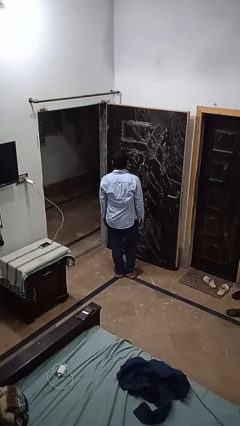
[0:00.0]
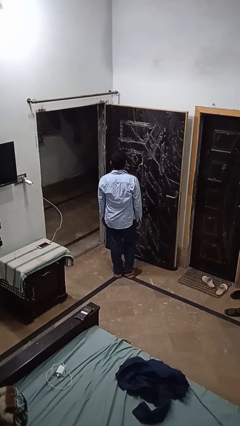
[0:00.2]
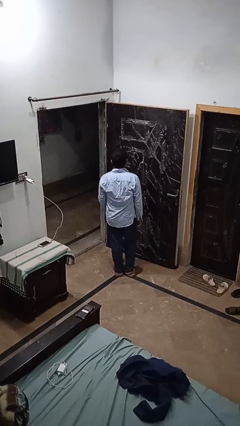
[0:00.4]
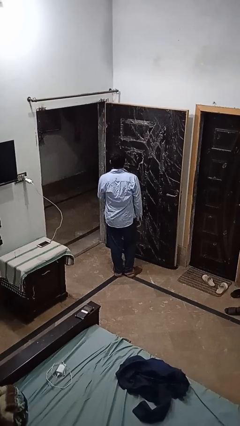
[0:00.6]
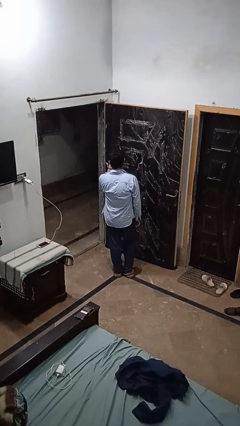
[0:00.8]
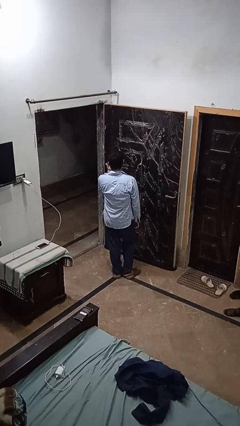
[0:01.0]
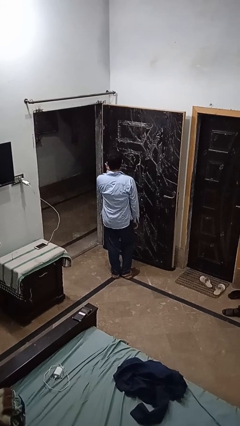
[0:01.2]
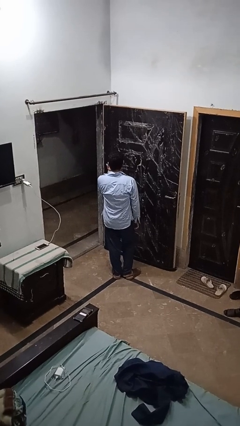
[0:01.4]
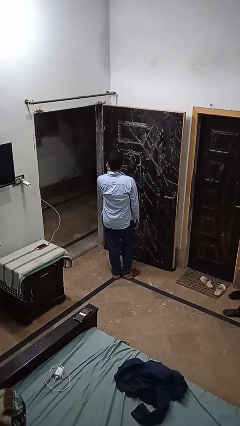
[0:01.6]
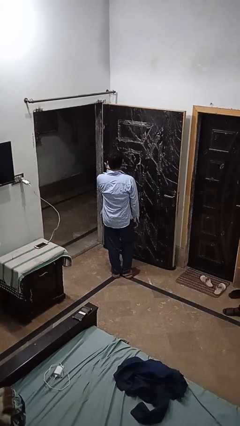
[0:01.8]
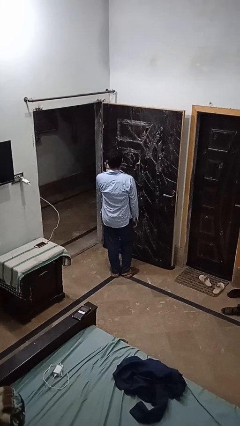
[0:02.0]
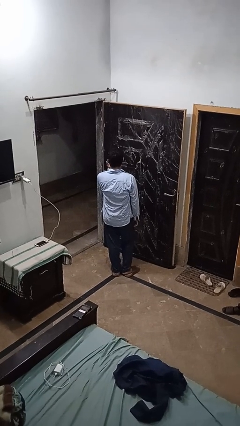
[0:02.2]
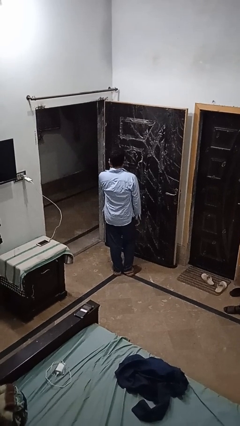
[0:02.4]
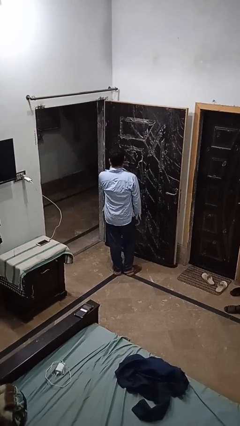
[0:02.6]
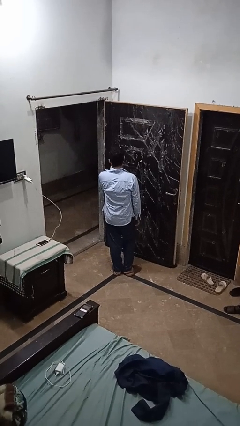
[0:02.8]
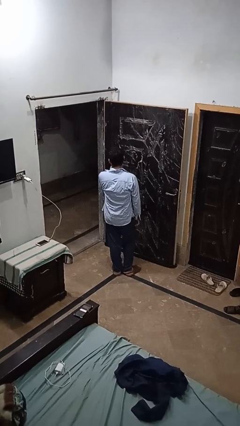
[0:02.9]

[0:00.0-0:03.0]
person licks fingers

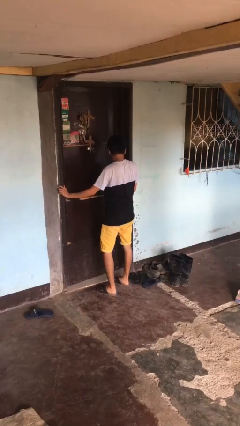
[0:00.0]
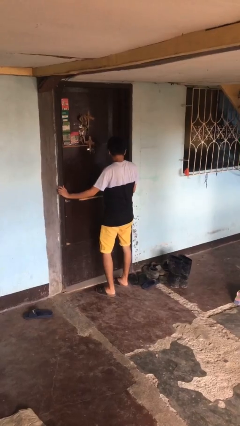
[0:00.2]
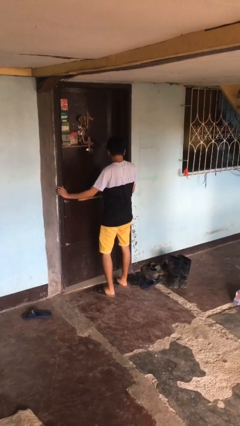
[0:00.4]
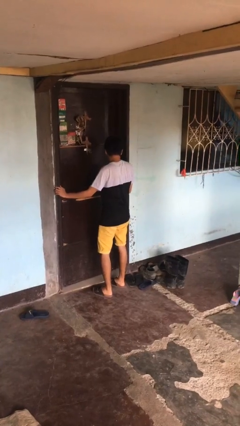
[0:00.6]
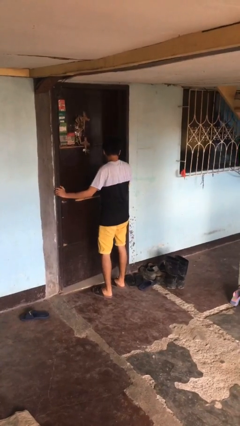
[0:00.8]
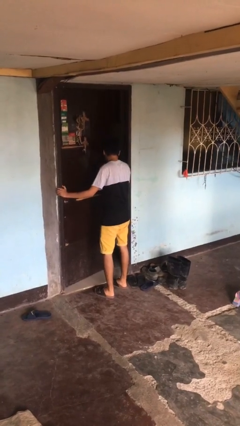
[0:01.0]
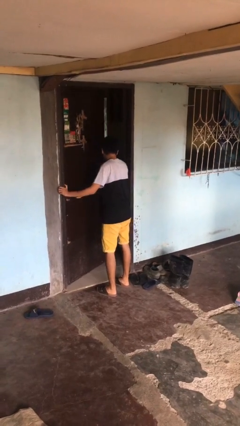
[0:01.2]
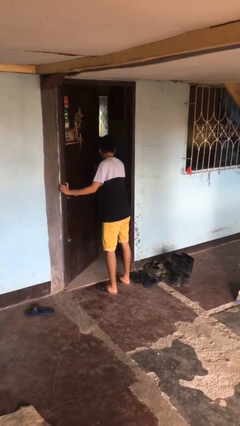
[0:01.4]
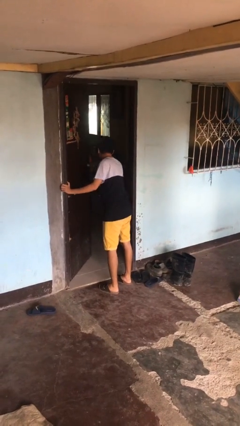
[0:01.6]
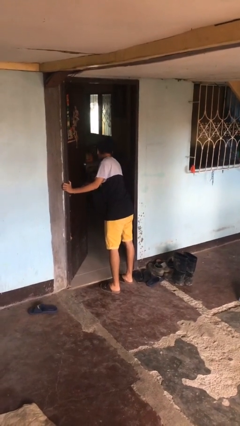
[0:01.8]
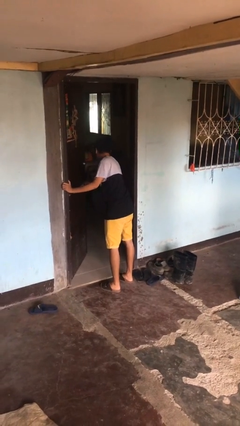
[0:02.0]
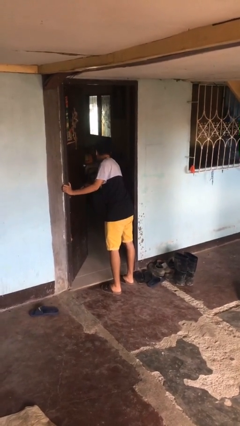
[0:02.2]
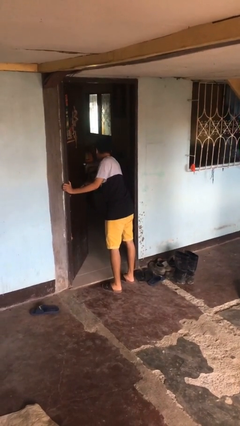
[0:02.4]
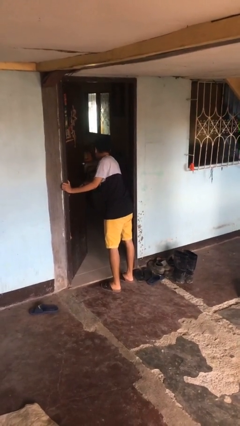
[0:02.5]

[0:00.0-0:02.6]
person opens facility door

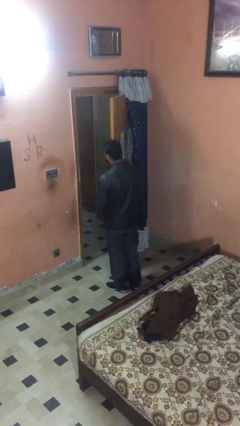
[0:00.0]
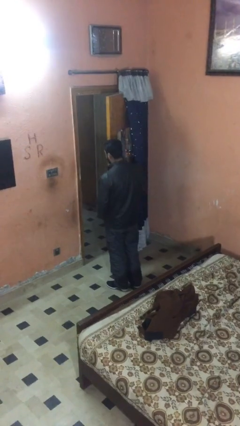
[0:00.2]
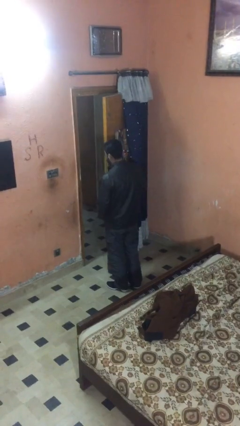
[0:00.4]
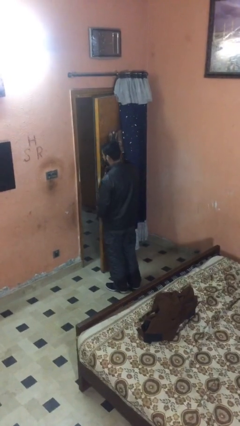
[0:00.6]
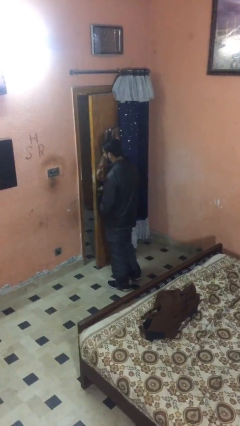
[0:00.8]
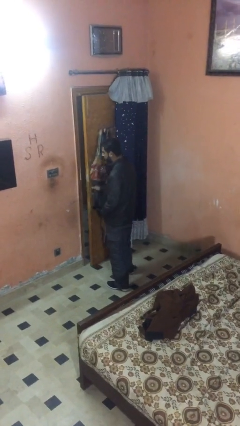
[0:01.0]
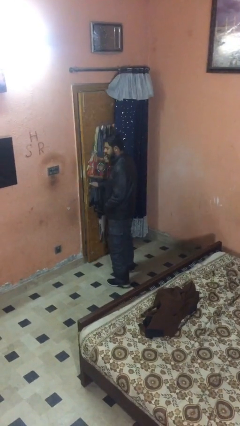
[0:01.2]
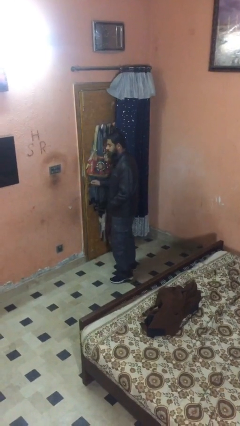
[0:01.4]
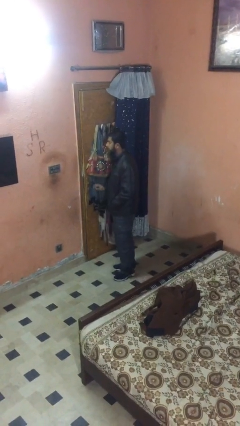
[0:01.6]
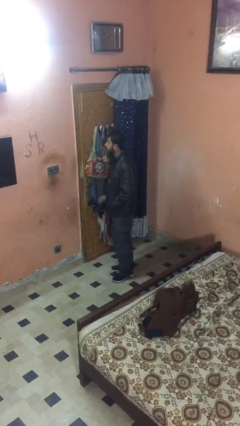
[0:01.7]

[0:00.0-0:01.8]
person closes facility door

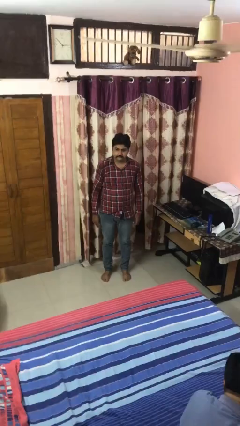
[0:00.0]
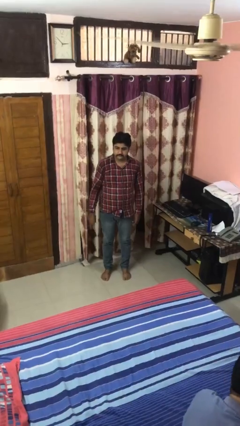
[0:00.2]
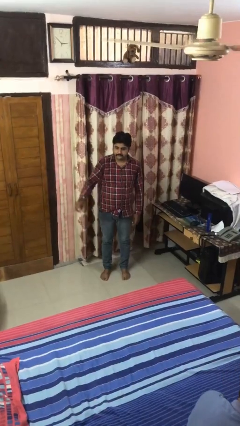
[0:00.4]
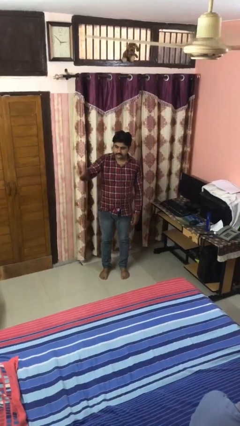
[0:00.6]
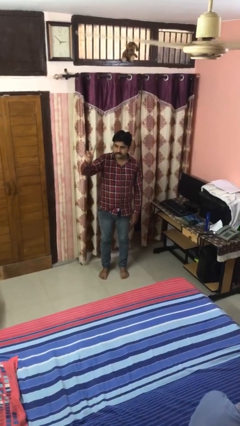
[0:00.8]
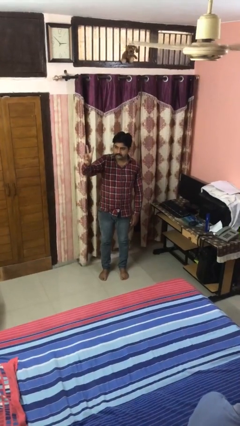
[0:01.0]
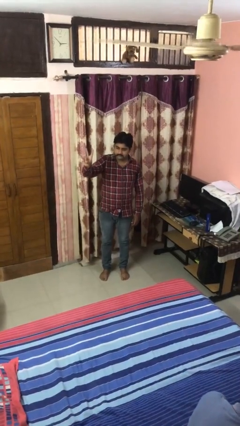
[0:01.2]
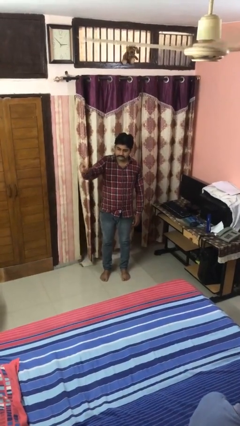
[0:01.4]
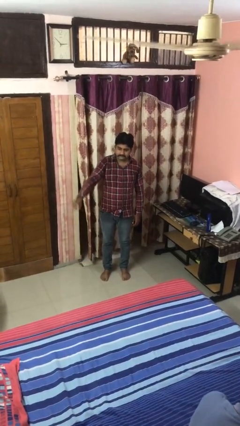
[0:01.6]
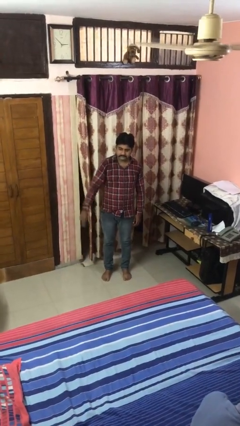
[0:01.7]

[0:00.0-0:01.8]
person gestures peace

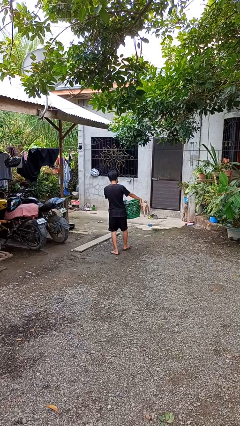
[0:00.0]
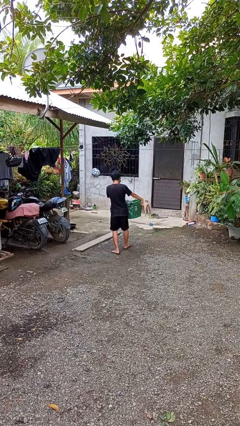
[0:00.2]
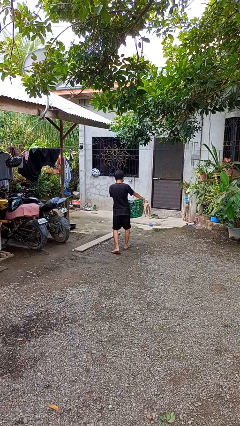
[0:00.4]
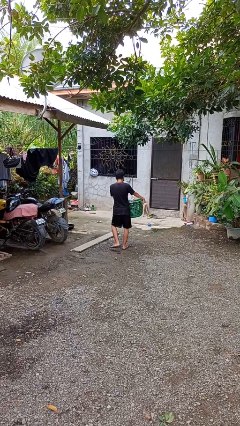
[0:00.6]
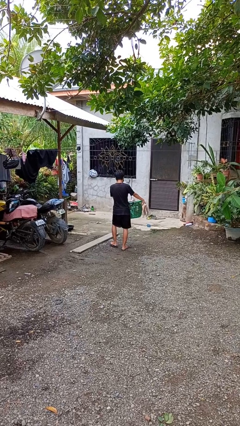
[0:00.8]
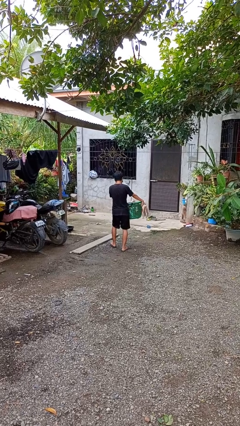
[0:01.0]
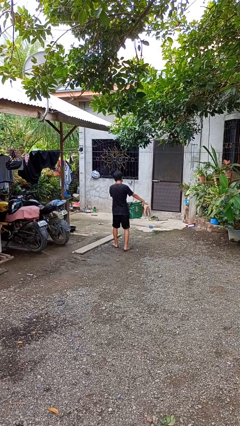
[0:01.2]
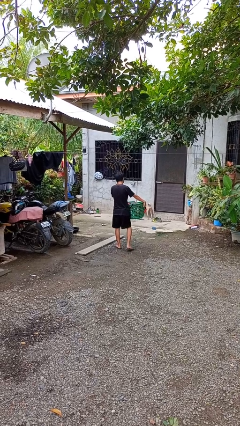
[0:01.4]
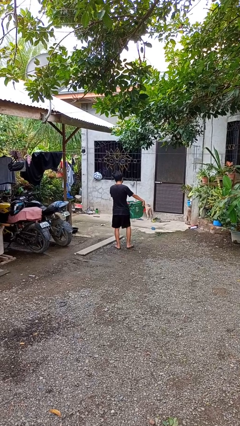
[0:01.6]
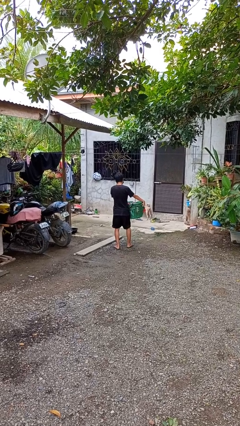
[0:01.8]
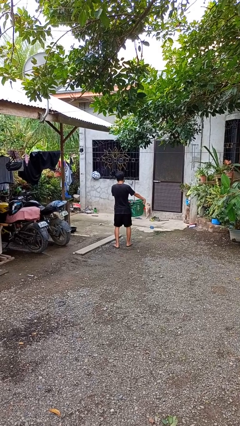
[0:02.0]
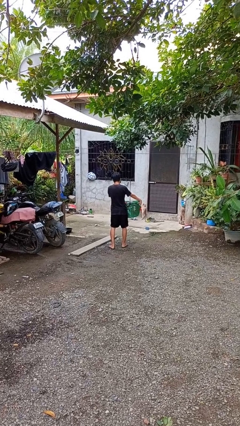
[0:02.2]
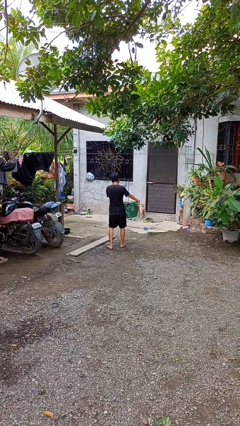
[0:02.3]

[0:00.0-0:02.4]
person carries laundry basket

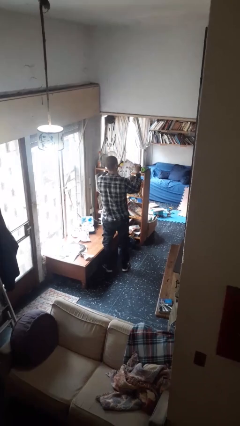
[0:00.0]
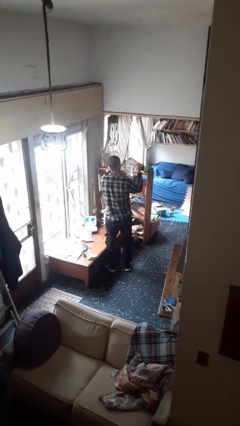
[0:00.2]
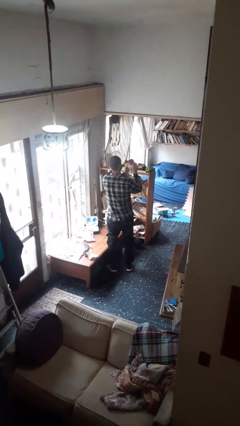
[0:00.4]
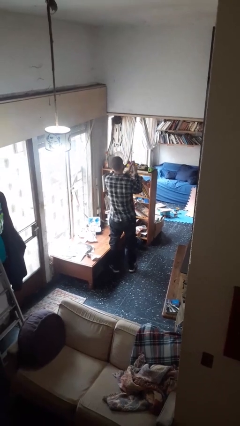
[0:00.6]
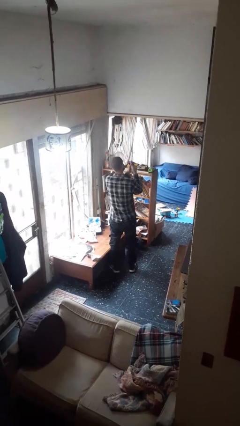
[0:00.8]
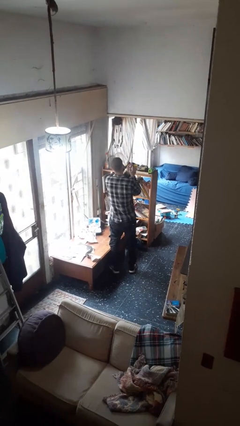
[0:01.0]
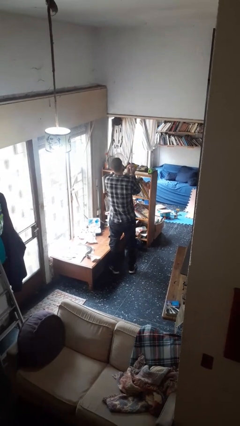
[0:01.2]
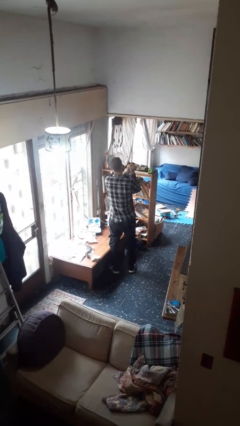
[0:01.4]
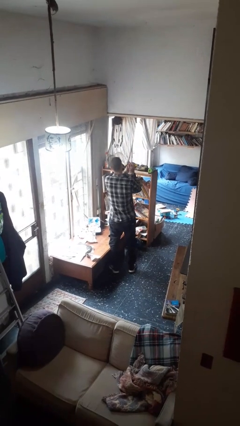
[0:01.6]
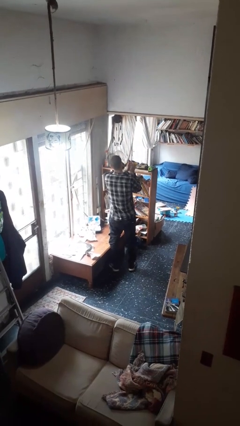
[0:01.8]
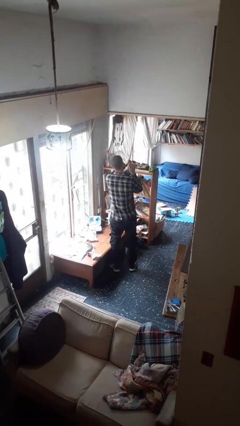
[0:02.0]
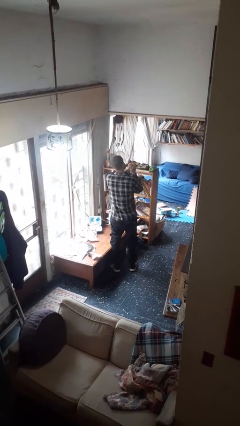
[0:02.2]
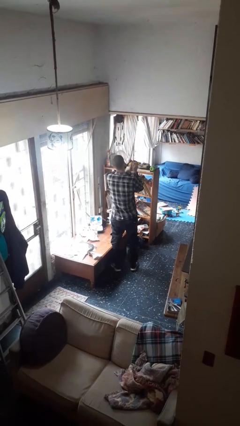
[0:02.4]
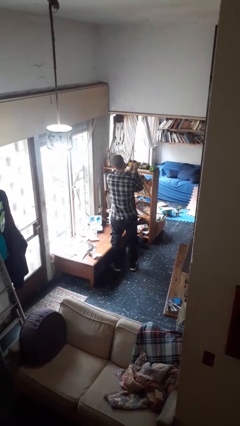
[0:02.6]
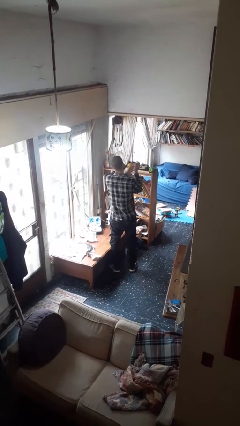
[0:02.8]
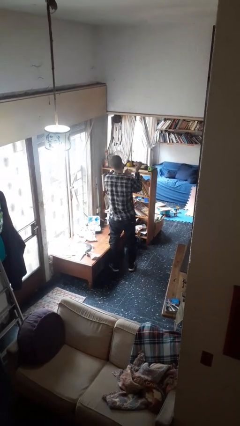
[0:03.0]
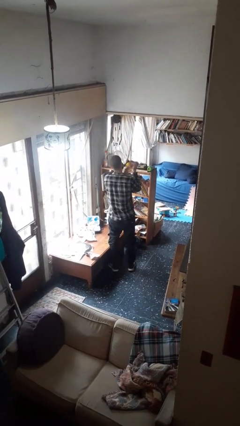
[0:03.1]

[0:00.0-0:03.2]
person crumples paper

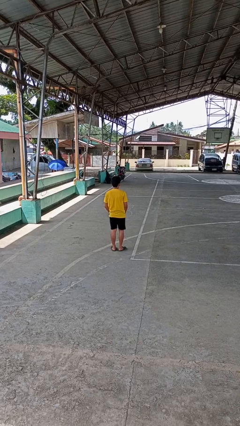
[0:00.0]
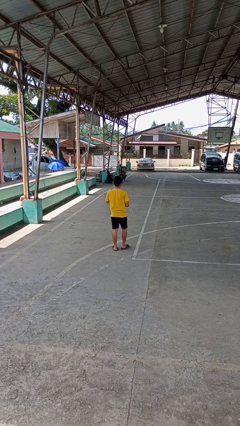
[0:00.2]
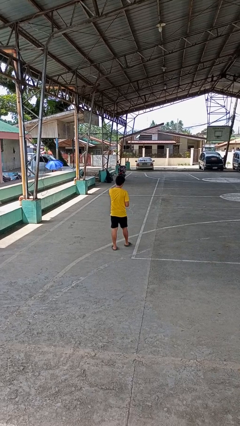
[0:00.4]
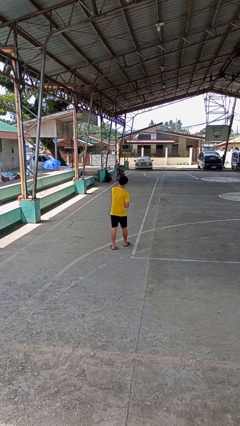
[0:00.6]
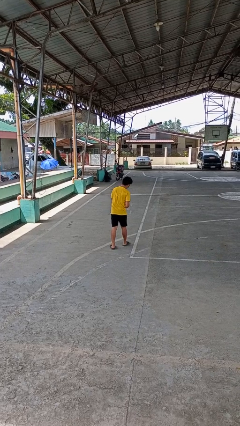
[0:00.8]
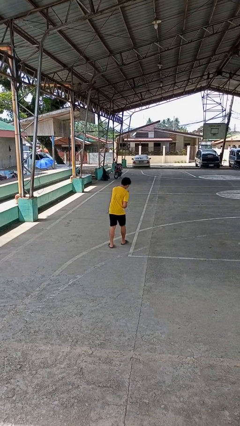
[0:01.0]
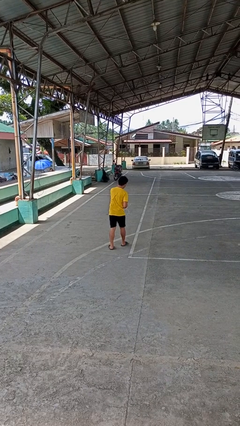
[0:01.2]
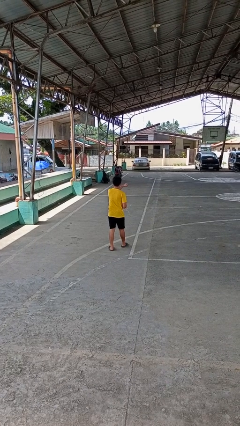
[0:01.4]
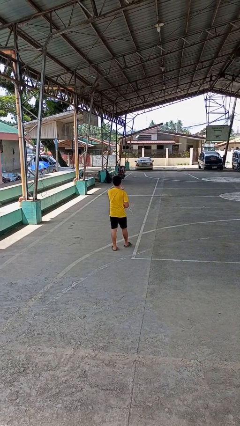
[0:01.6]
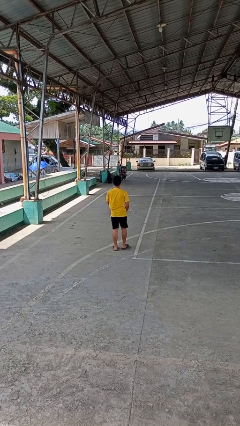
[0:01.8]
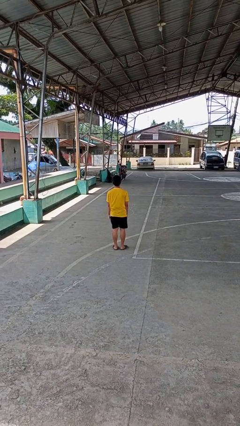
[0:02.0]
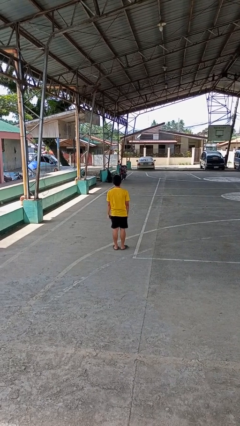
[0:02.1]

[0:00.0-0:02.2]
person punches

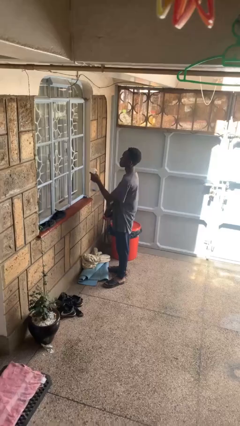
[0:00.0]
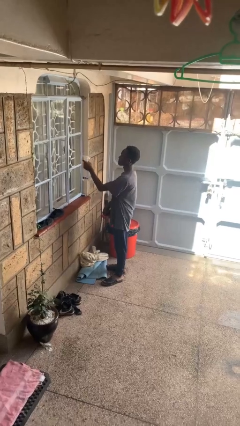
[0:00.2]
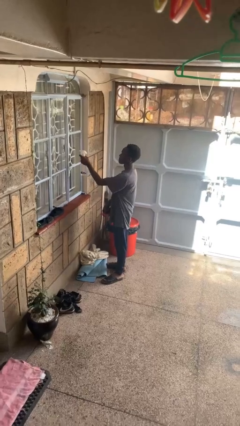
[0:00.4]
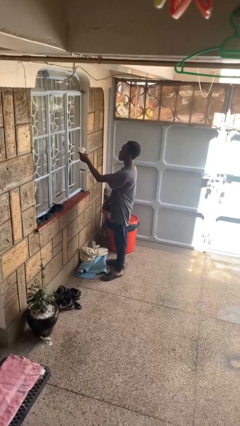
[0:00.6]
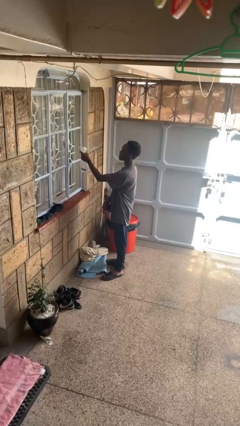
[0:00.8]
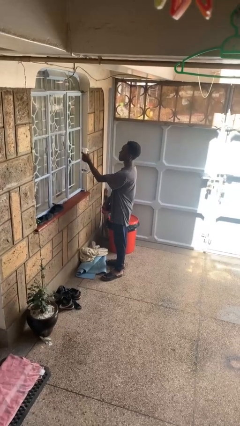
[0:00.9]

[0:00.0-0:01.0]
person sprays from bottle